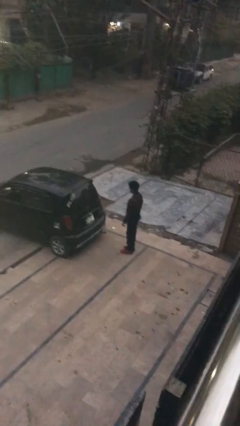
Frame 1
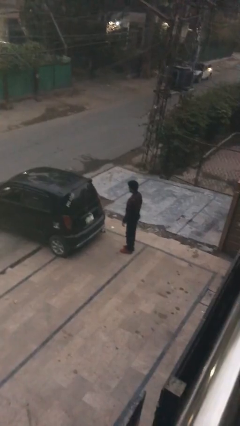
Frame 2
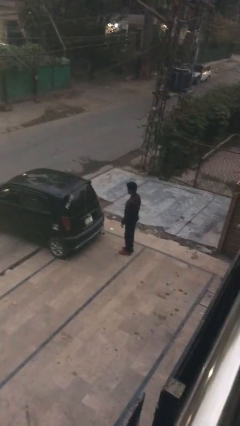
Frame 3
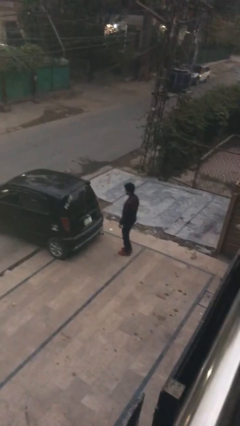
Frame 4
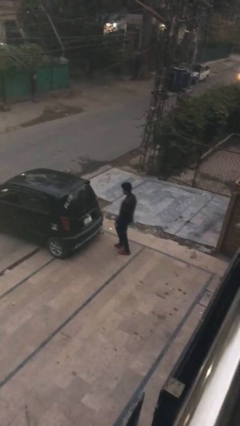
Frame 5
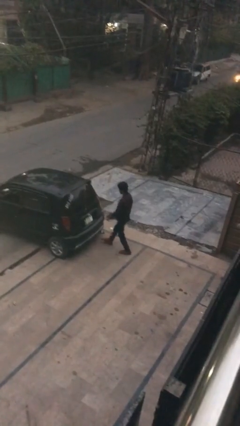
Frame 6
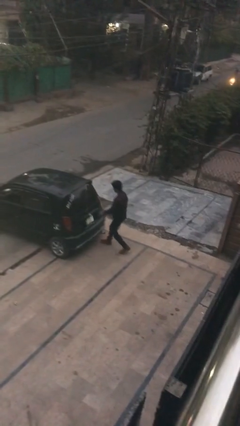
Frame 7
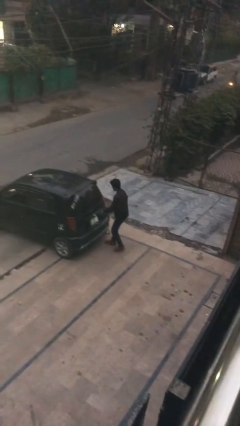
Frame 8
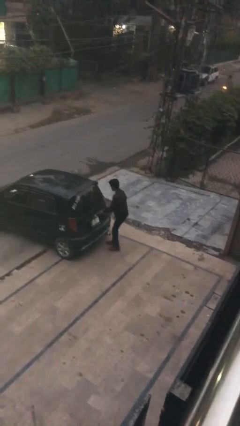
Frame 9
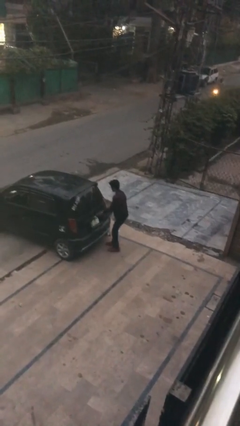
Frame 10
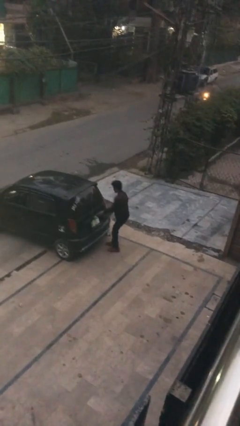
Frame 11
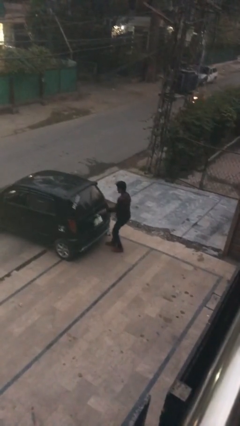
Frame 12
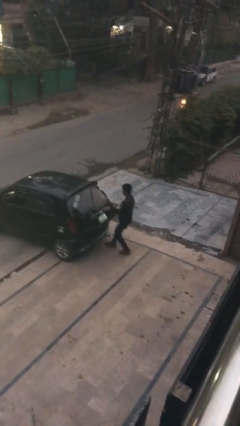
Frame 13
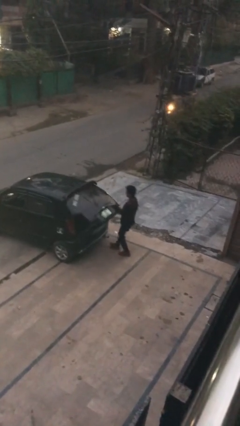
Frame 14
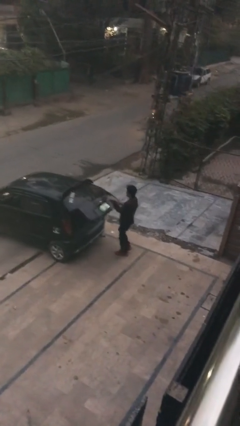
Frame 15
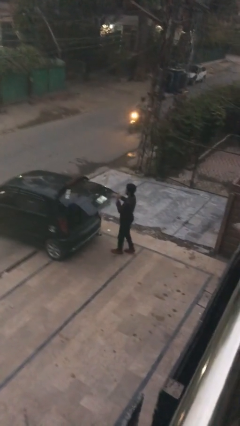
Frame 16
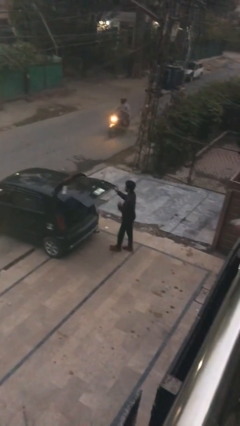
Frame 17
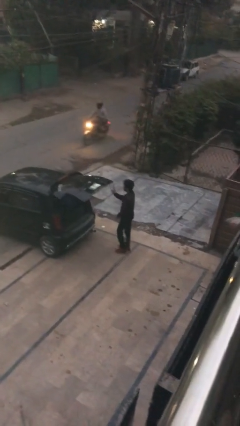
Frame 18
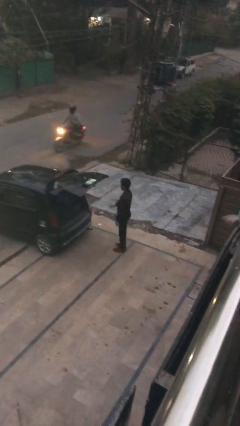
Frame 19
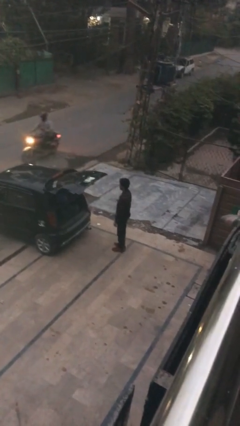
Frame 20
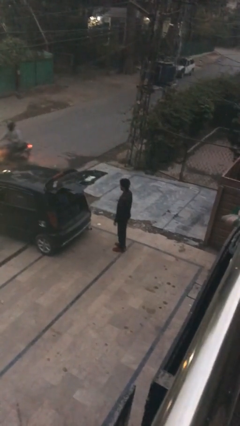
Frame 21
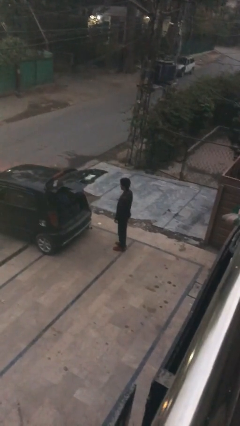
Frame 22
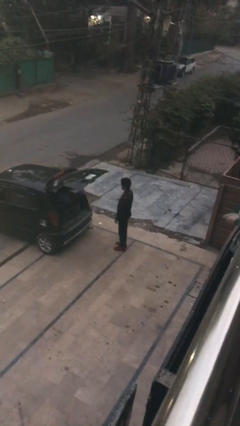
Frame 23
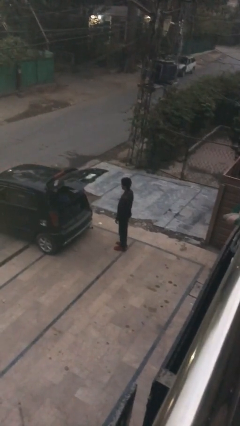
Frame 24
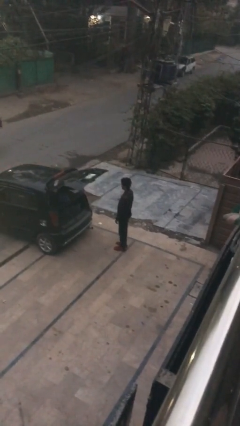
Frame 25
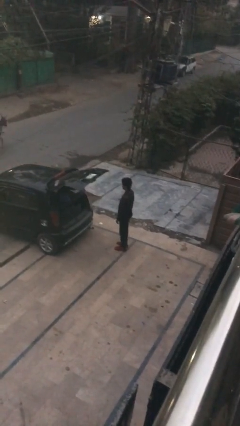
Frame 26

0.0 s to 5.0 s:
person opens car trunk

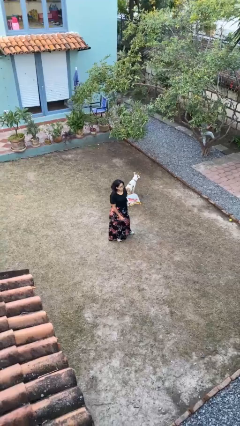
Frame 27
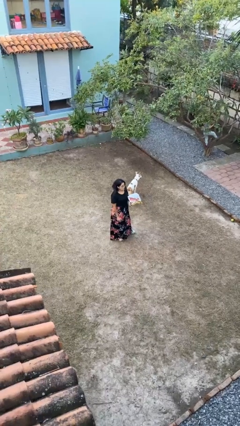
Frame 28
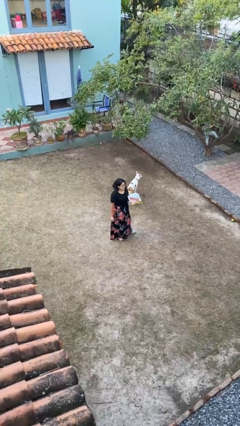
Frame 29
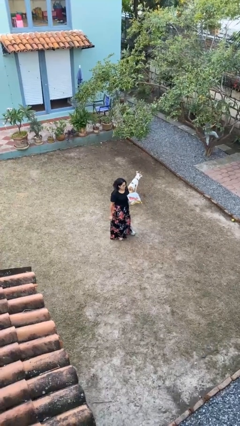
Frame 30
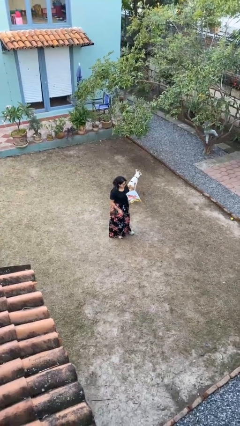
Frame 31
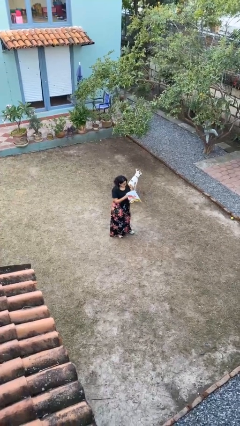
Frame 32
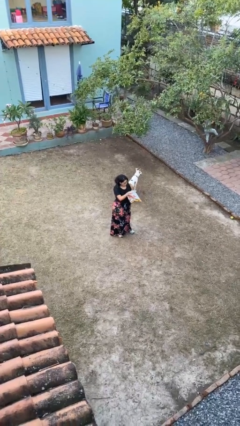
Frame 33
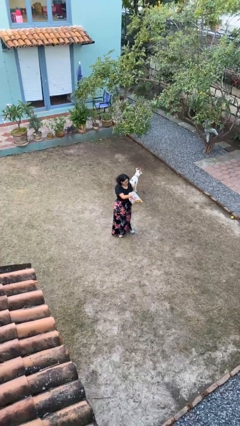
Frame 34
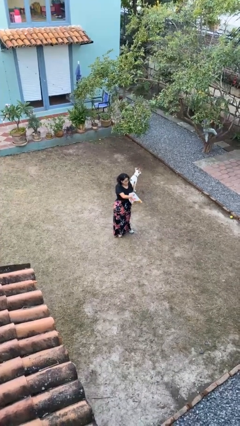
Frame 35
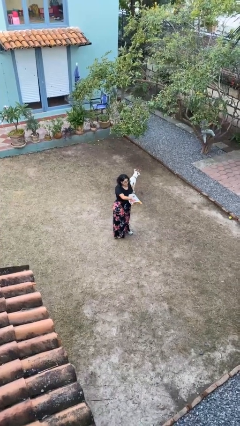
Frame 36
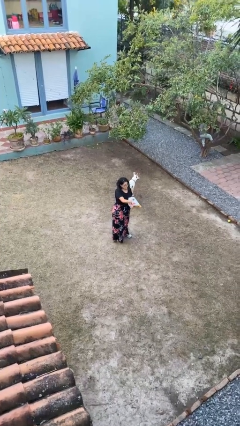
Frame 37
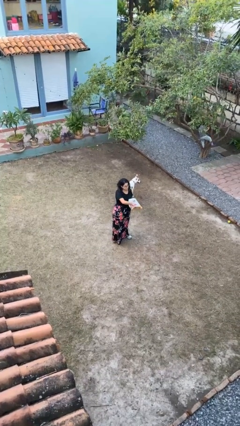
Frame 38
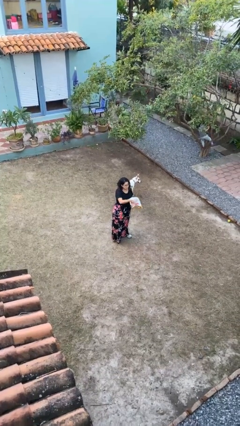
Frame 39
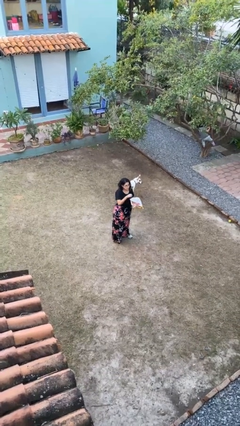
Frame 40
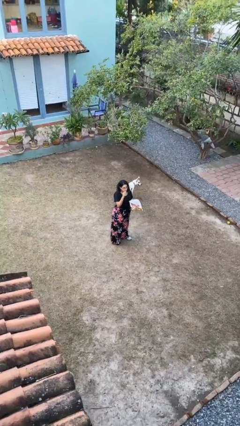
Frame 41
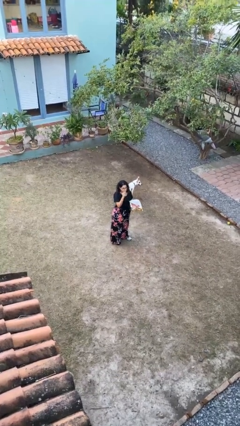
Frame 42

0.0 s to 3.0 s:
person eats snack from bag

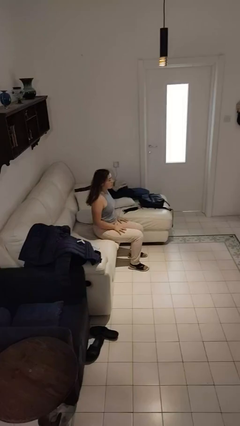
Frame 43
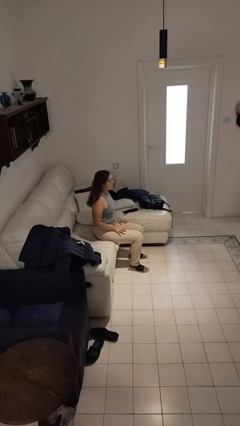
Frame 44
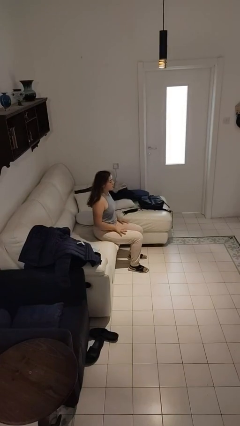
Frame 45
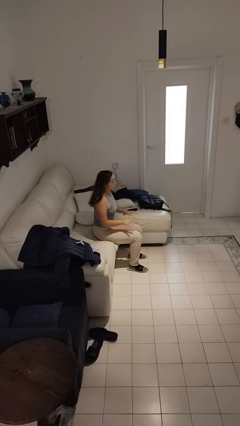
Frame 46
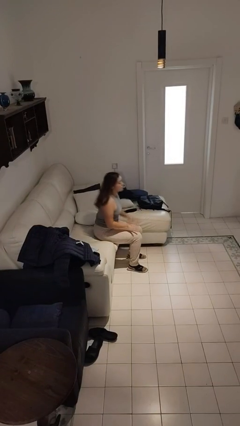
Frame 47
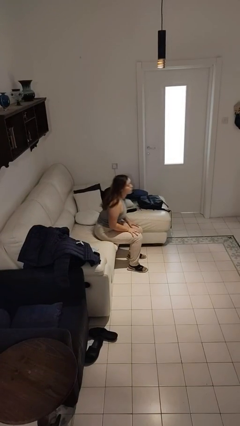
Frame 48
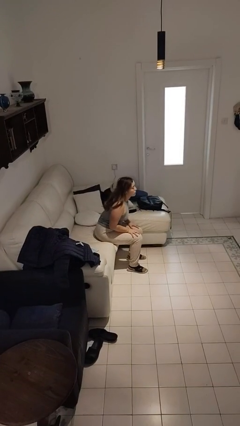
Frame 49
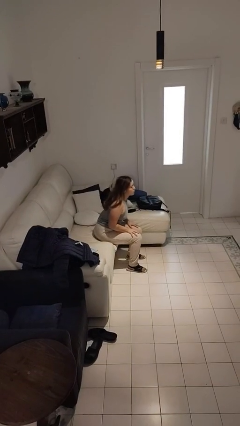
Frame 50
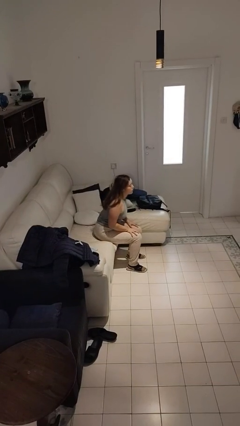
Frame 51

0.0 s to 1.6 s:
person slaps hands on thighs

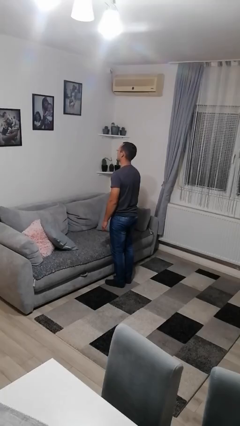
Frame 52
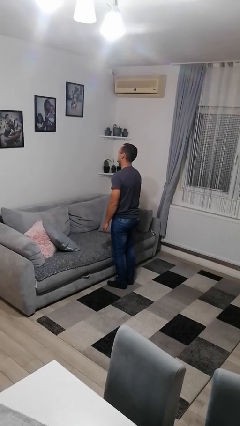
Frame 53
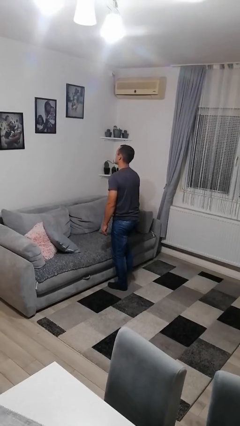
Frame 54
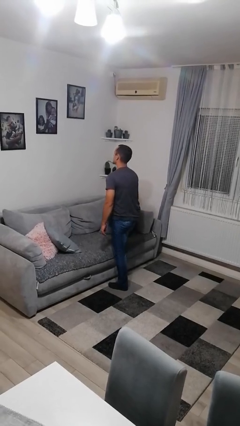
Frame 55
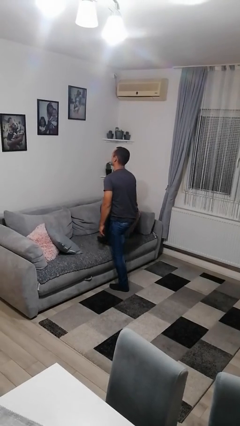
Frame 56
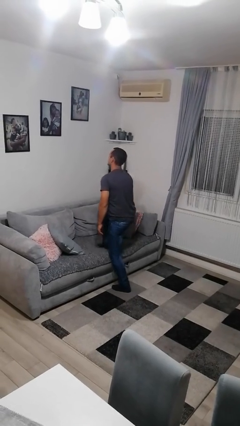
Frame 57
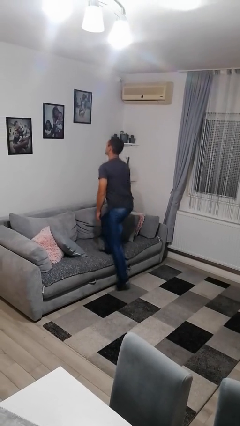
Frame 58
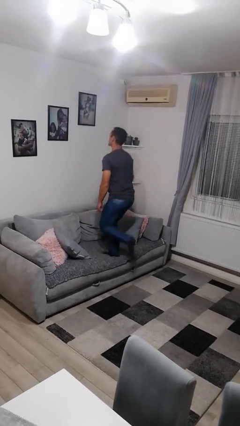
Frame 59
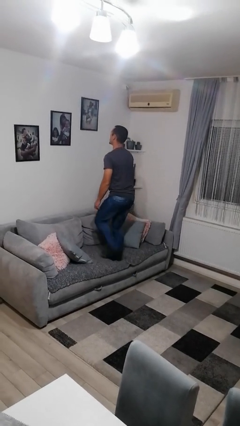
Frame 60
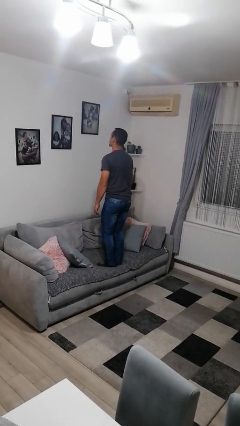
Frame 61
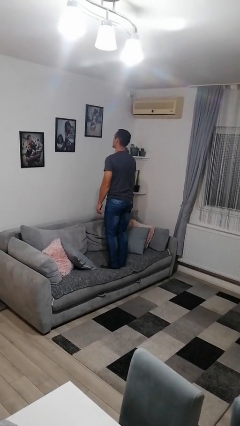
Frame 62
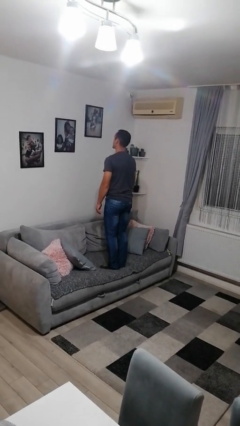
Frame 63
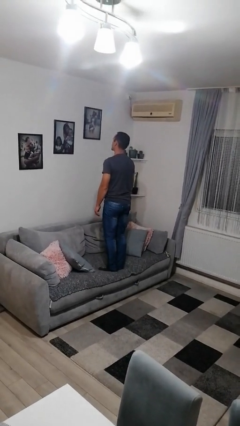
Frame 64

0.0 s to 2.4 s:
person climbs on couch

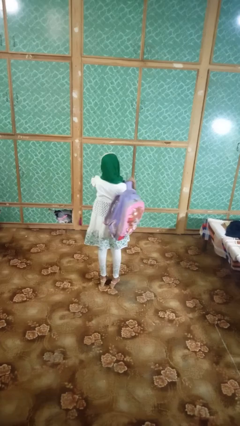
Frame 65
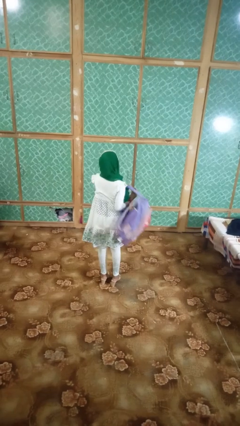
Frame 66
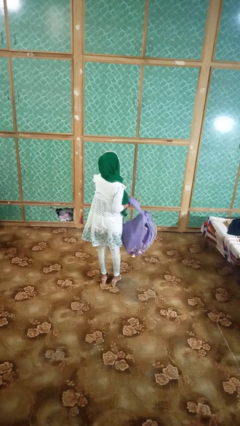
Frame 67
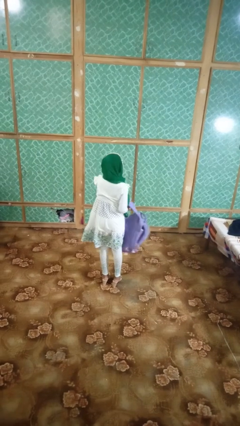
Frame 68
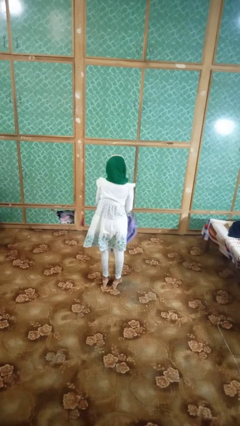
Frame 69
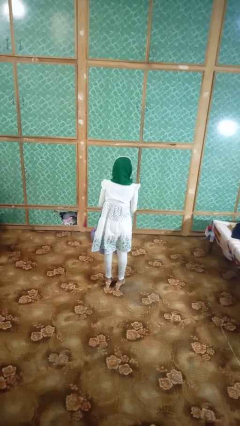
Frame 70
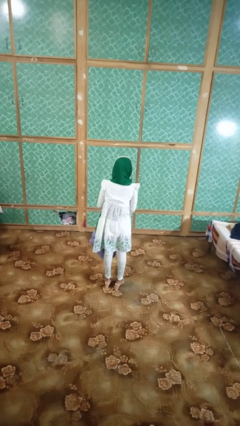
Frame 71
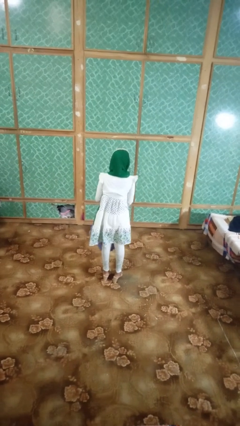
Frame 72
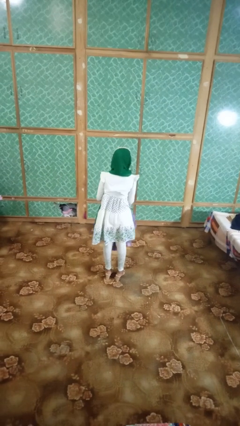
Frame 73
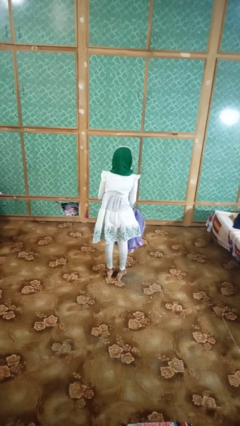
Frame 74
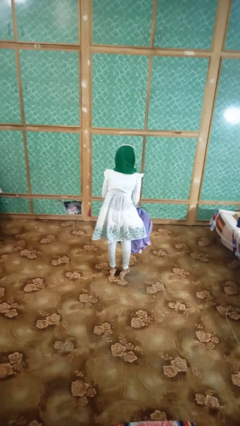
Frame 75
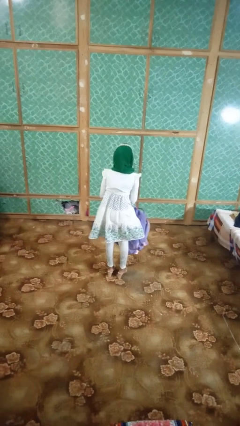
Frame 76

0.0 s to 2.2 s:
person takes off backpack

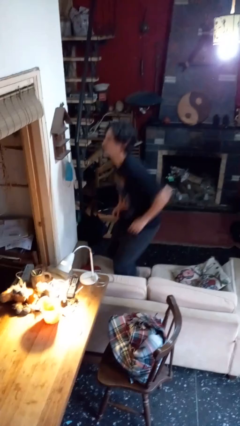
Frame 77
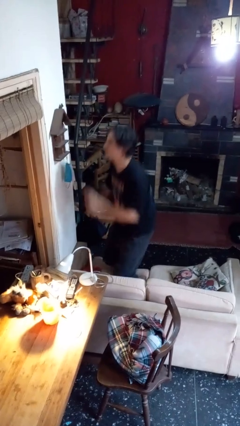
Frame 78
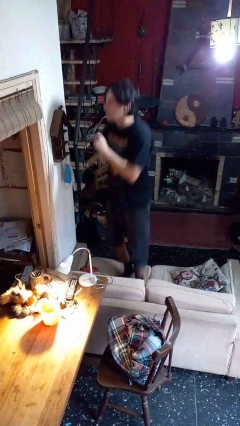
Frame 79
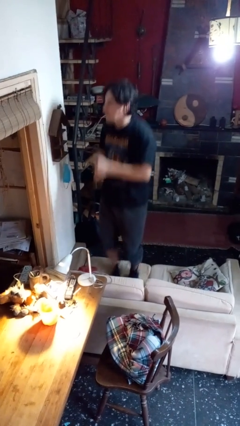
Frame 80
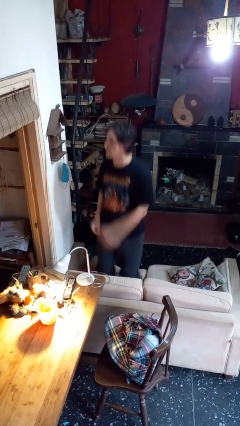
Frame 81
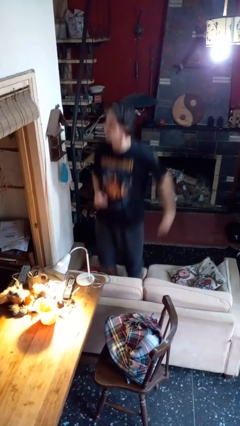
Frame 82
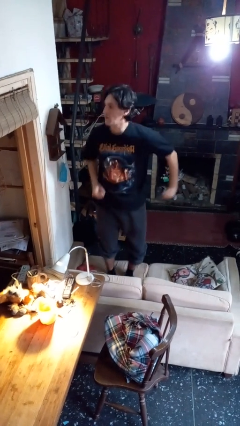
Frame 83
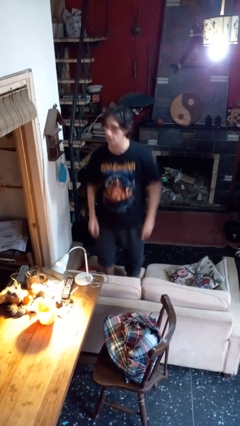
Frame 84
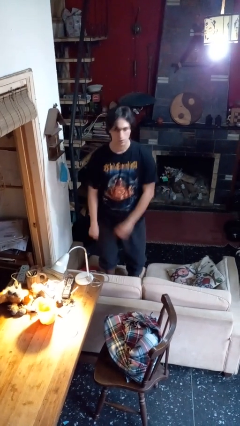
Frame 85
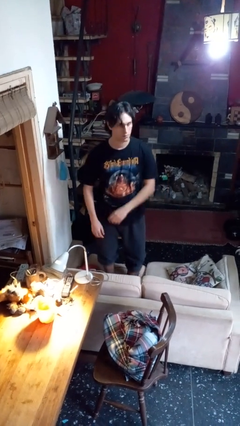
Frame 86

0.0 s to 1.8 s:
person jumps on couch

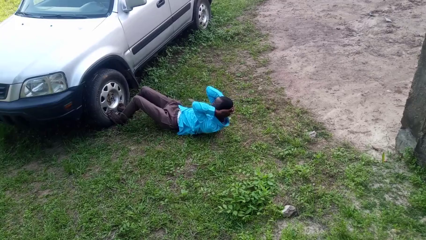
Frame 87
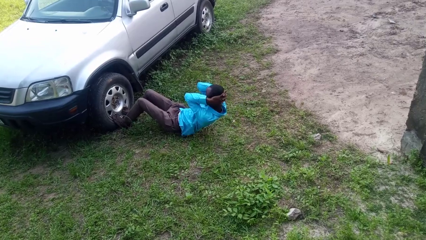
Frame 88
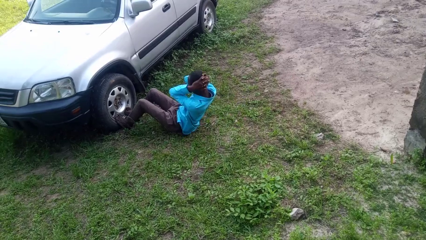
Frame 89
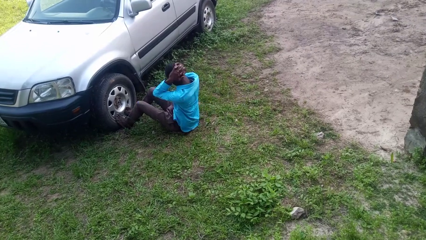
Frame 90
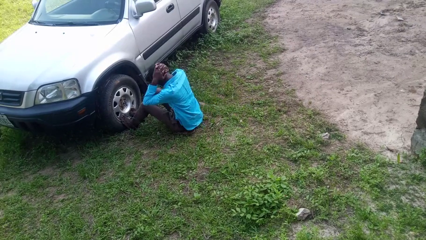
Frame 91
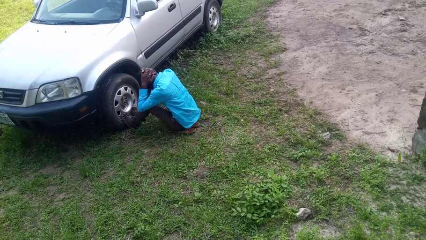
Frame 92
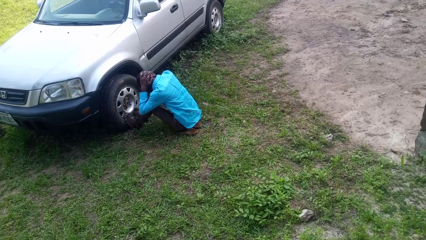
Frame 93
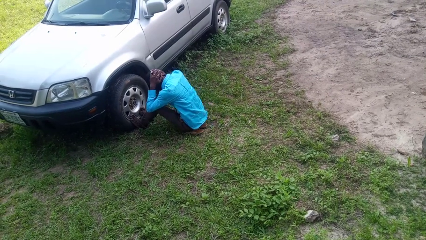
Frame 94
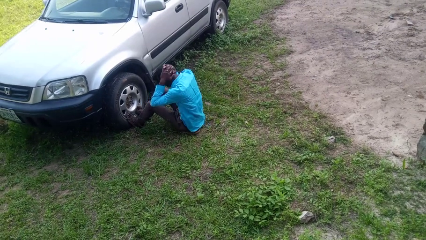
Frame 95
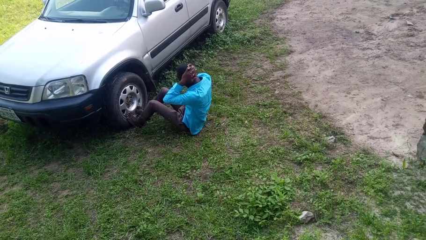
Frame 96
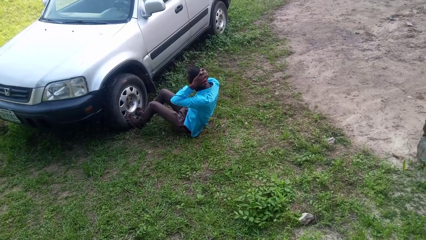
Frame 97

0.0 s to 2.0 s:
person exercises with situp
